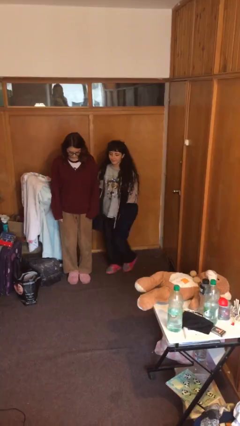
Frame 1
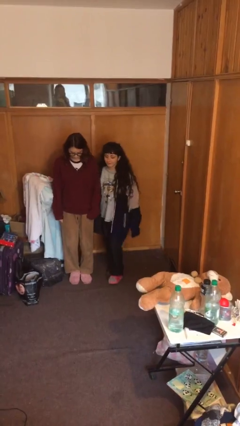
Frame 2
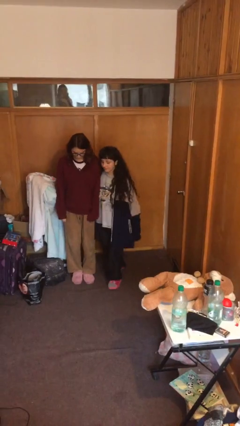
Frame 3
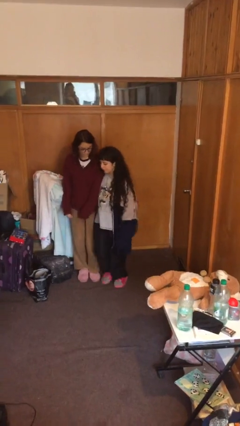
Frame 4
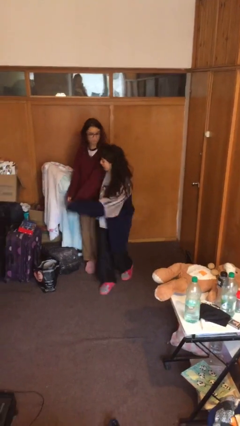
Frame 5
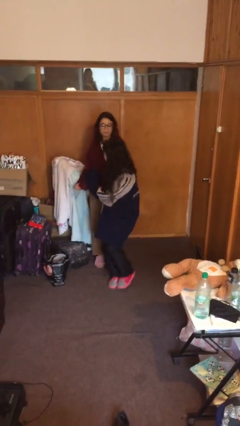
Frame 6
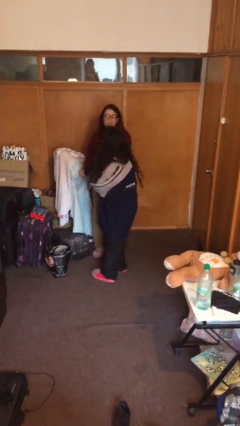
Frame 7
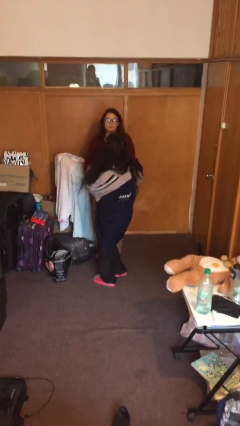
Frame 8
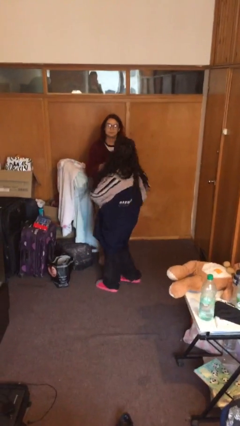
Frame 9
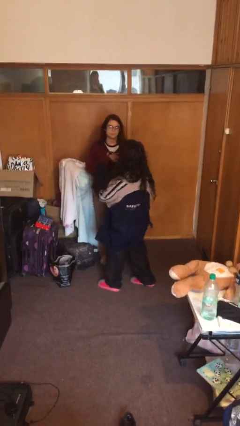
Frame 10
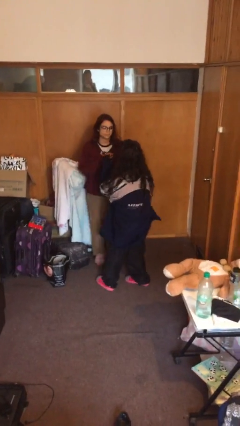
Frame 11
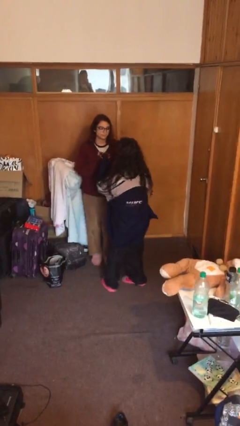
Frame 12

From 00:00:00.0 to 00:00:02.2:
person bumps into person

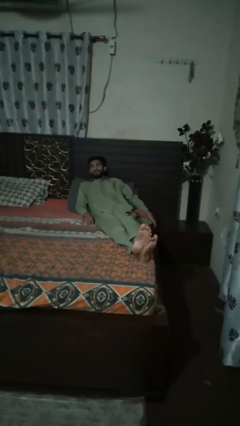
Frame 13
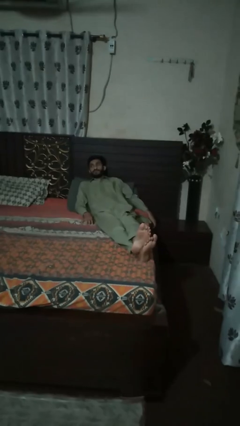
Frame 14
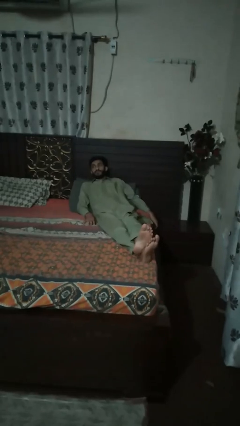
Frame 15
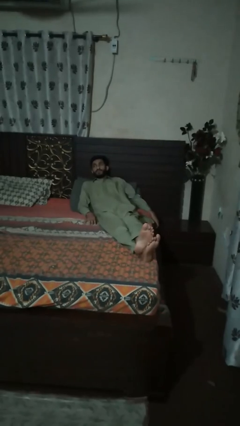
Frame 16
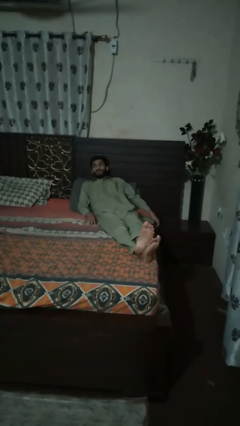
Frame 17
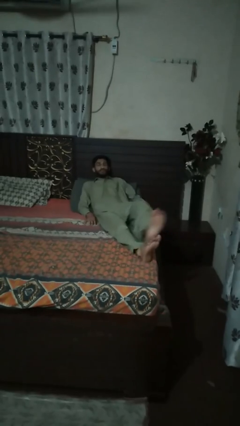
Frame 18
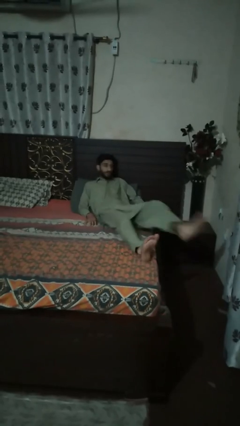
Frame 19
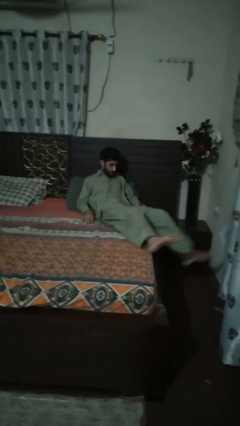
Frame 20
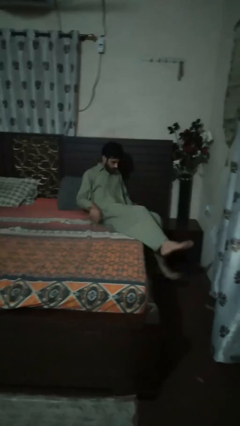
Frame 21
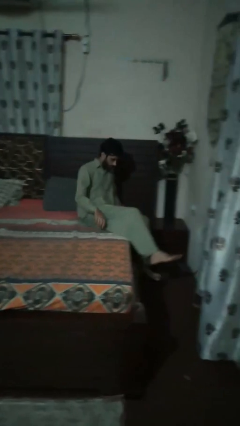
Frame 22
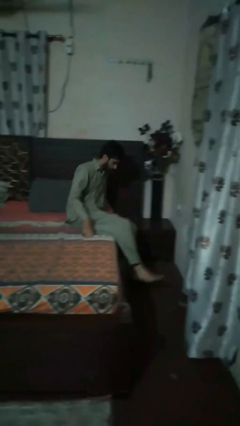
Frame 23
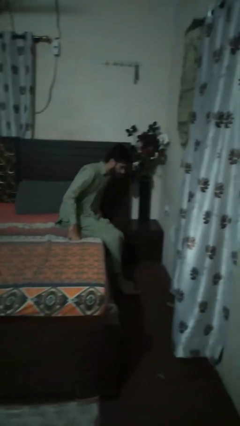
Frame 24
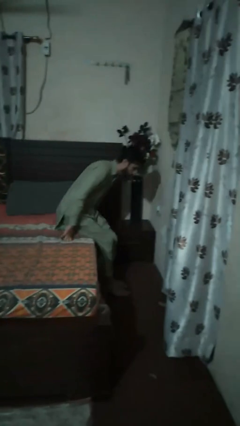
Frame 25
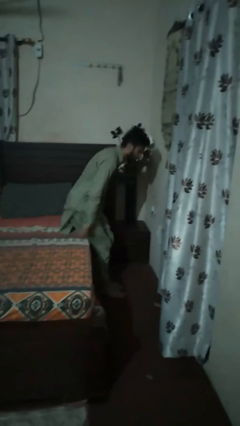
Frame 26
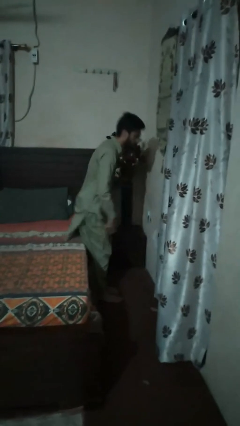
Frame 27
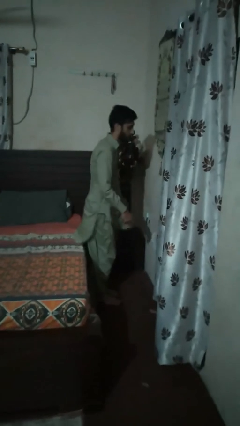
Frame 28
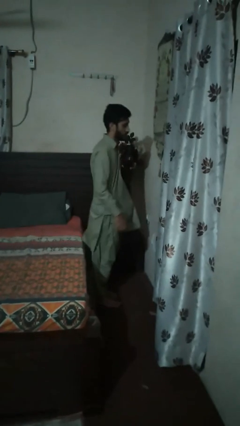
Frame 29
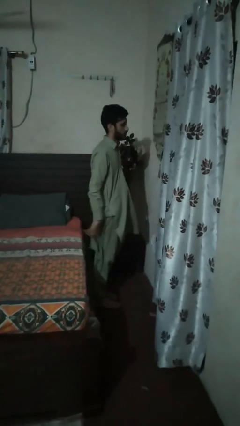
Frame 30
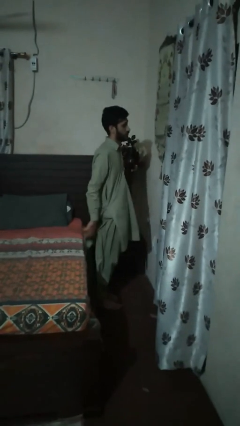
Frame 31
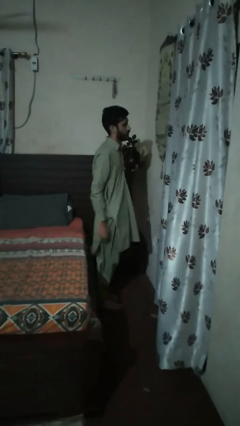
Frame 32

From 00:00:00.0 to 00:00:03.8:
person stands up

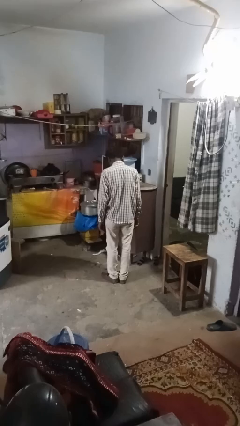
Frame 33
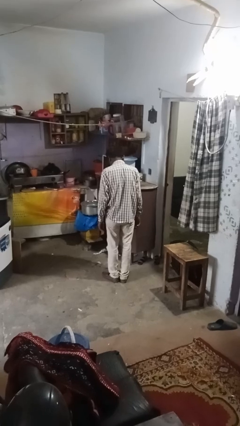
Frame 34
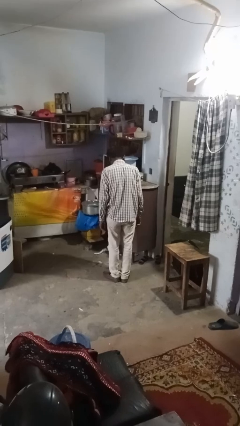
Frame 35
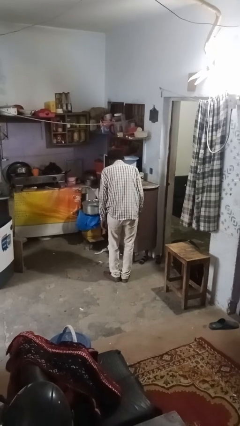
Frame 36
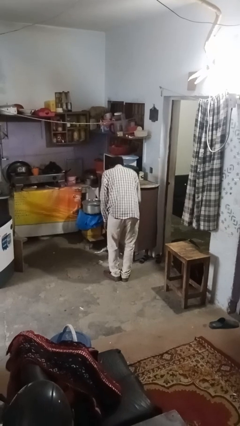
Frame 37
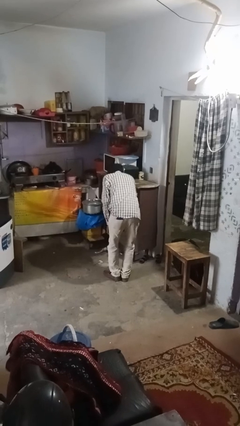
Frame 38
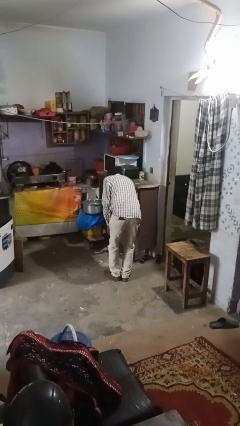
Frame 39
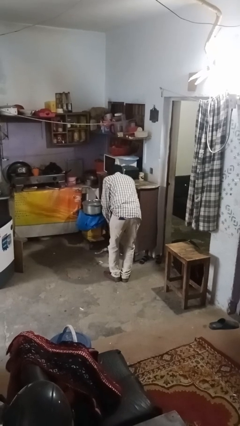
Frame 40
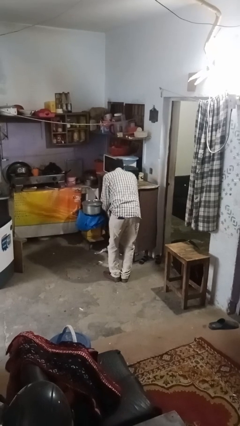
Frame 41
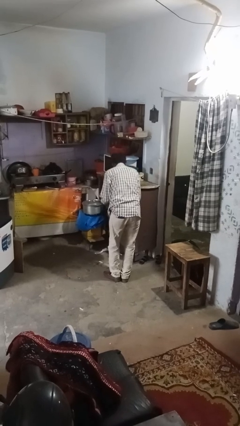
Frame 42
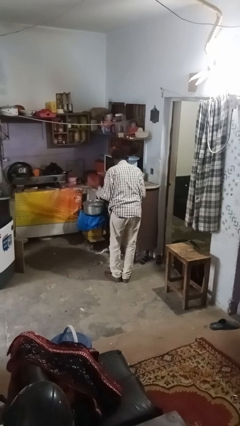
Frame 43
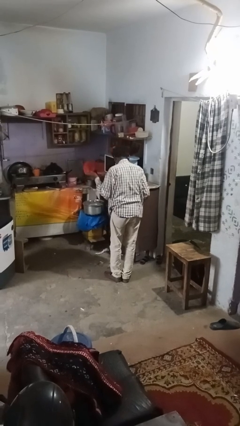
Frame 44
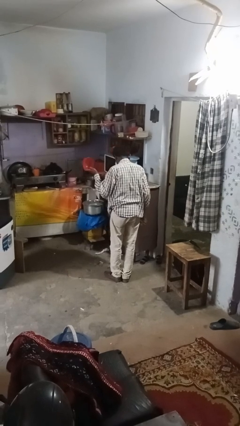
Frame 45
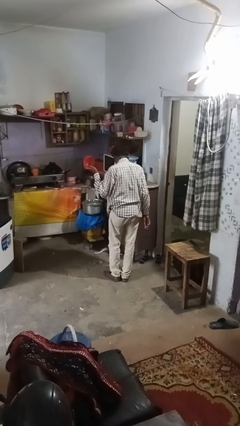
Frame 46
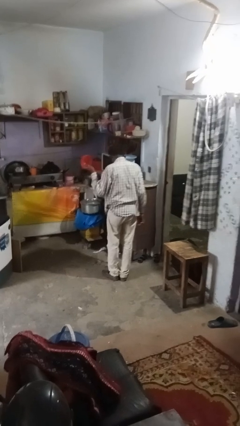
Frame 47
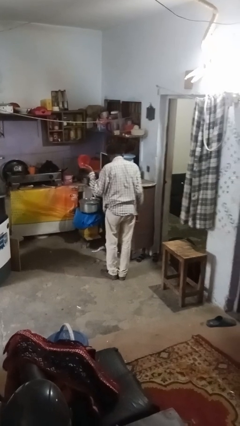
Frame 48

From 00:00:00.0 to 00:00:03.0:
person takes object from kitchen drawer

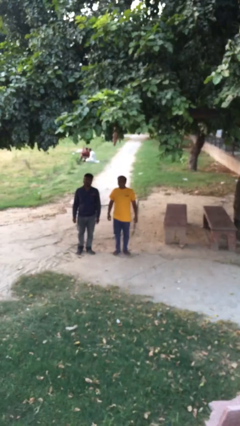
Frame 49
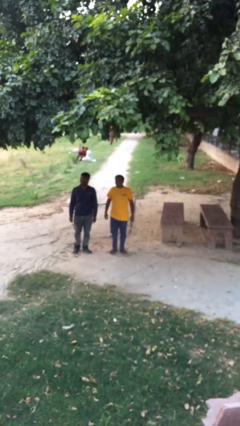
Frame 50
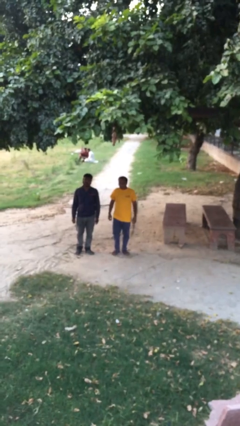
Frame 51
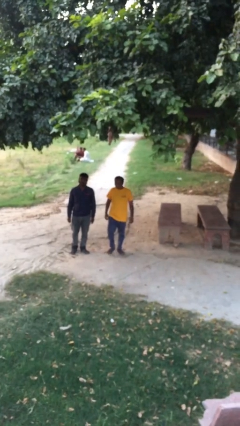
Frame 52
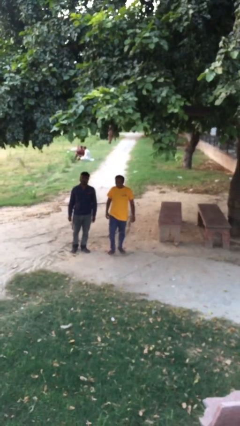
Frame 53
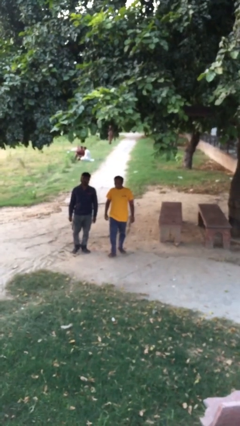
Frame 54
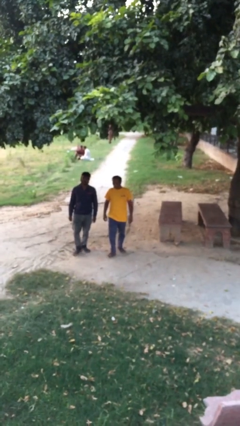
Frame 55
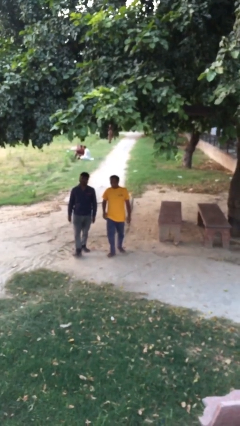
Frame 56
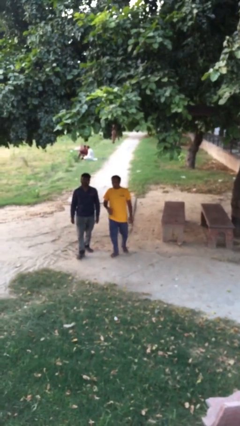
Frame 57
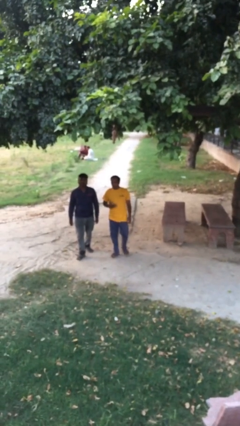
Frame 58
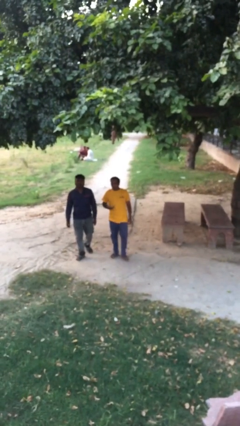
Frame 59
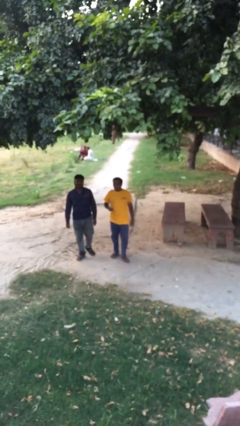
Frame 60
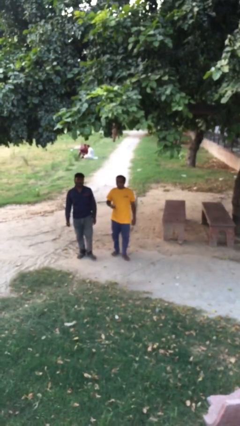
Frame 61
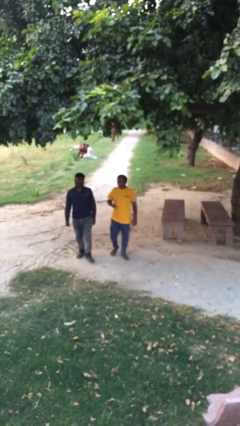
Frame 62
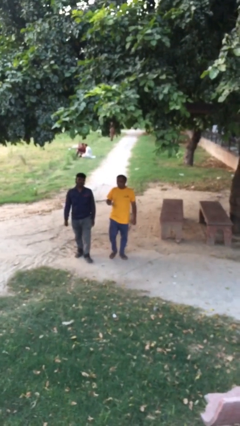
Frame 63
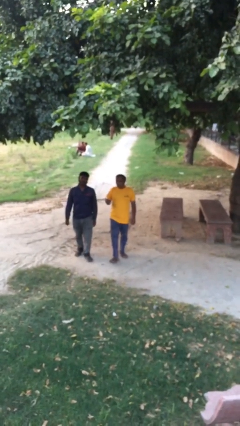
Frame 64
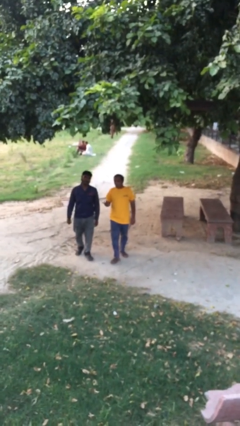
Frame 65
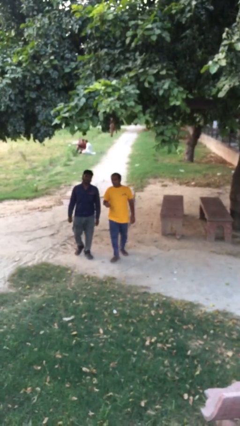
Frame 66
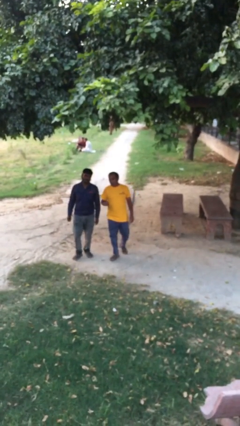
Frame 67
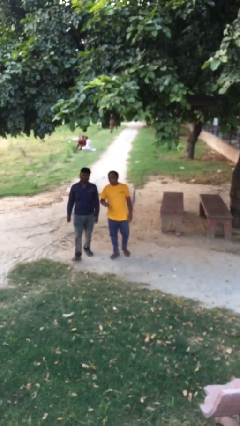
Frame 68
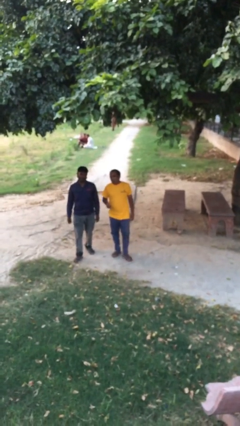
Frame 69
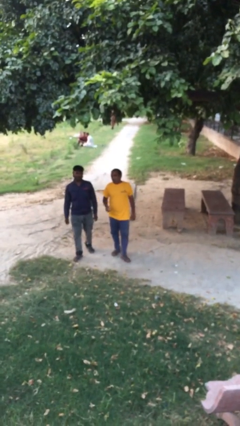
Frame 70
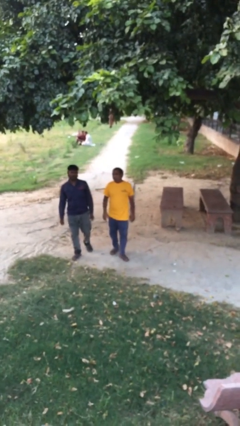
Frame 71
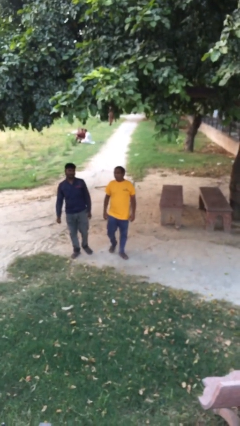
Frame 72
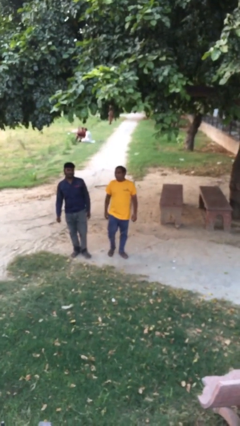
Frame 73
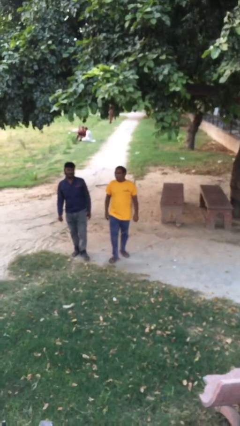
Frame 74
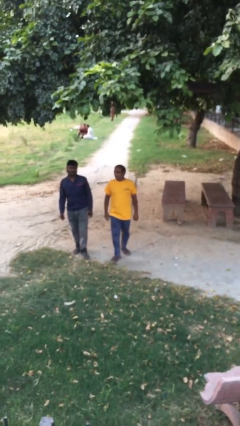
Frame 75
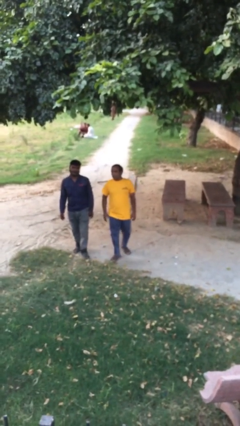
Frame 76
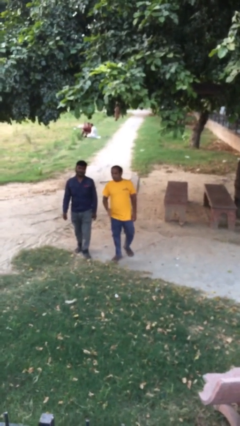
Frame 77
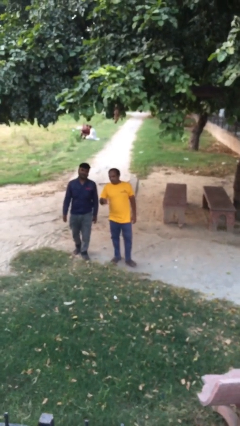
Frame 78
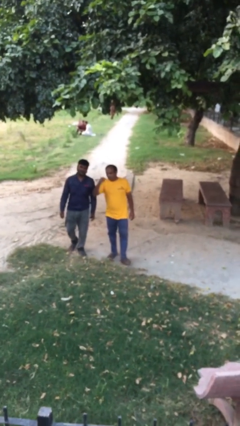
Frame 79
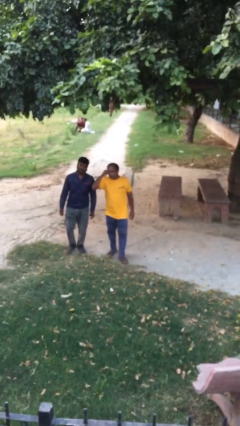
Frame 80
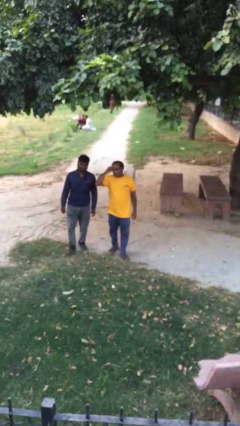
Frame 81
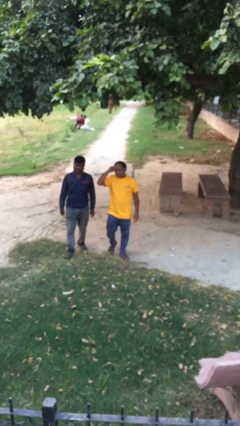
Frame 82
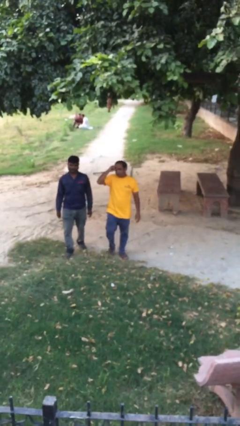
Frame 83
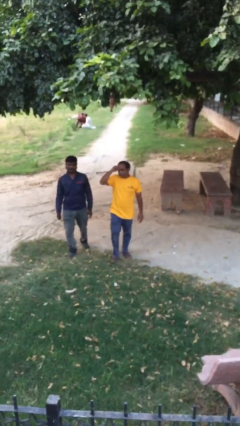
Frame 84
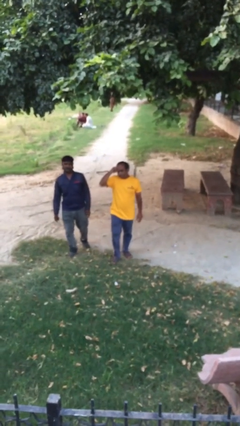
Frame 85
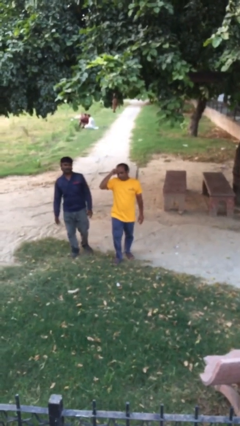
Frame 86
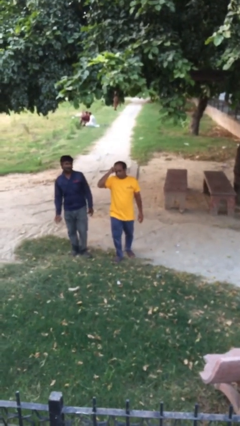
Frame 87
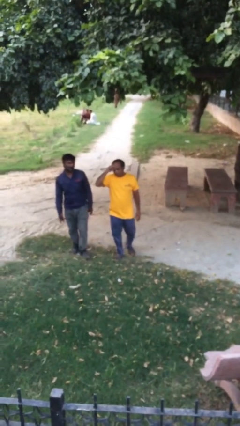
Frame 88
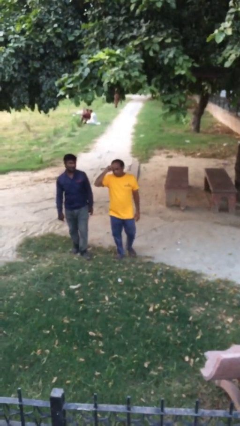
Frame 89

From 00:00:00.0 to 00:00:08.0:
person talks to person

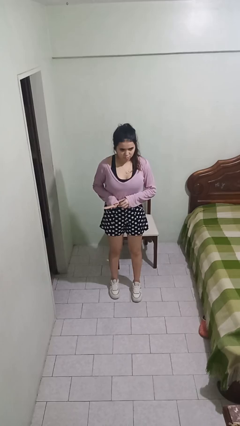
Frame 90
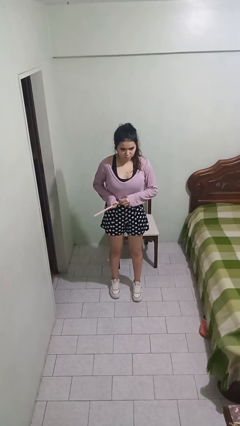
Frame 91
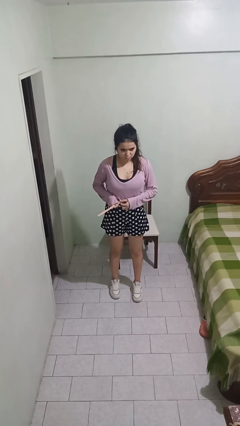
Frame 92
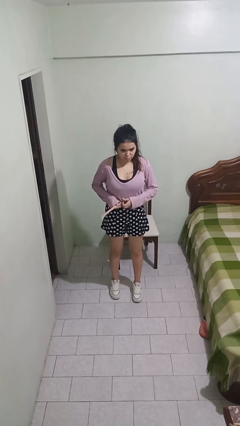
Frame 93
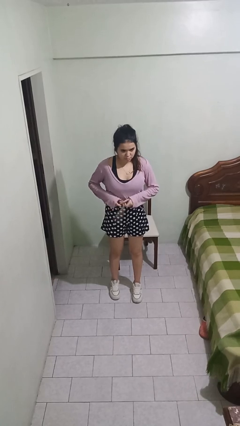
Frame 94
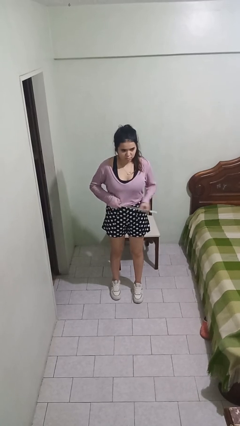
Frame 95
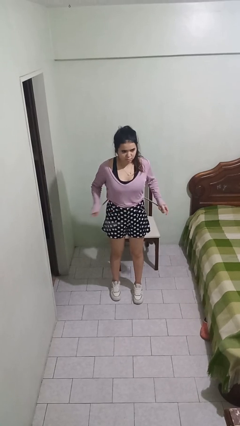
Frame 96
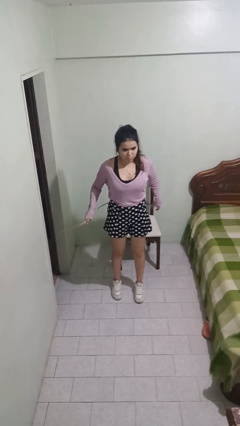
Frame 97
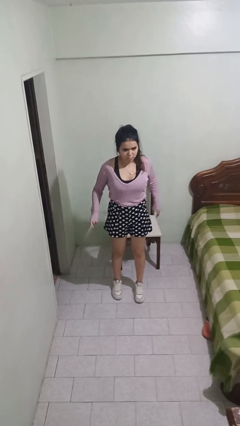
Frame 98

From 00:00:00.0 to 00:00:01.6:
person takes off belt
